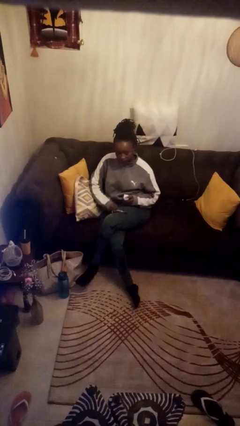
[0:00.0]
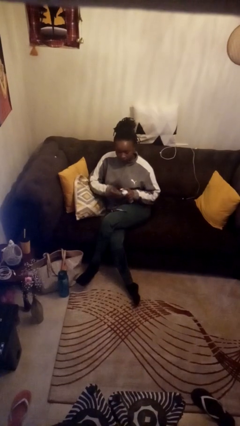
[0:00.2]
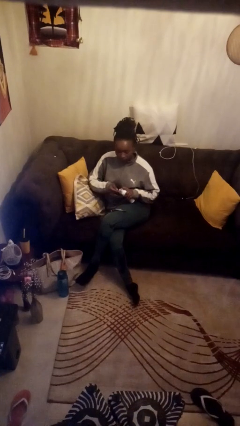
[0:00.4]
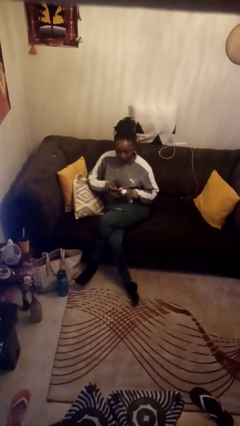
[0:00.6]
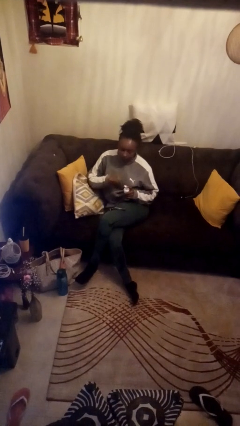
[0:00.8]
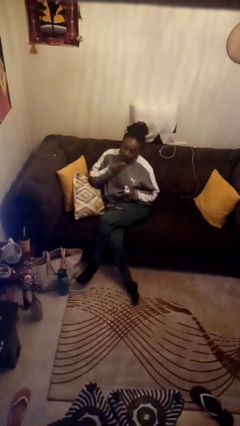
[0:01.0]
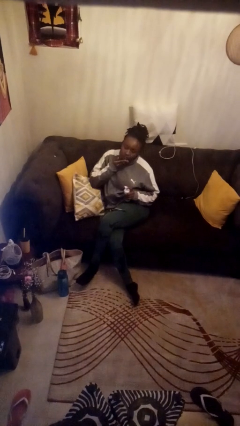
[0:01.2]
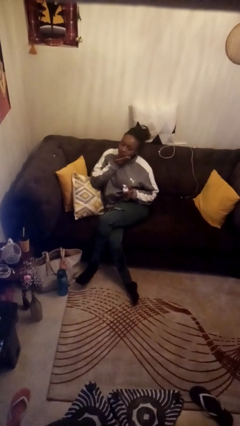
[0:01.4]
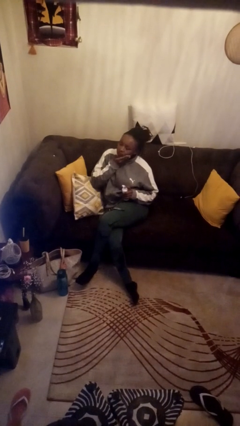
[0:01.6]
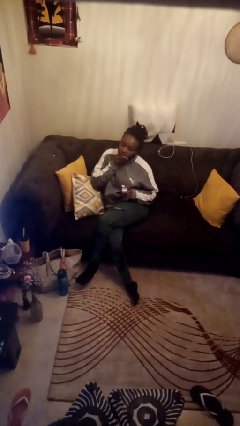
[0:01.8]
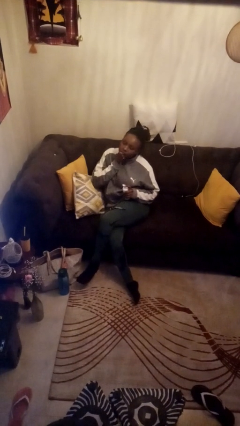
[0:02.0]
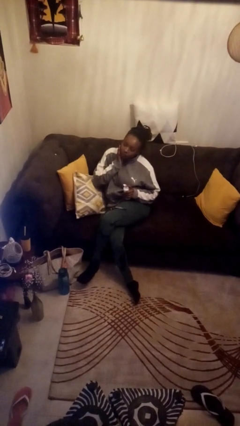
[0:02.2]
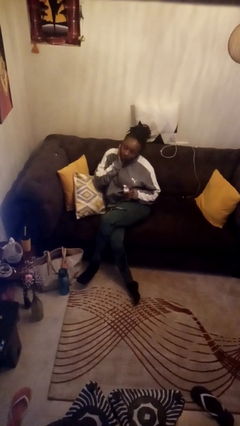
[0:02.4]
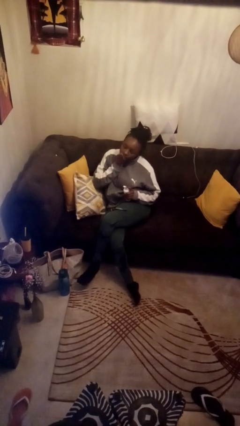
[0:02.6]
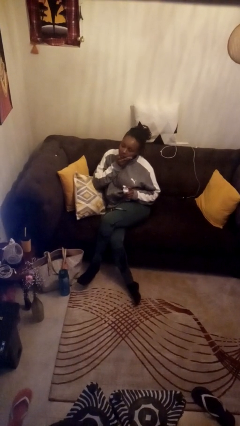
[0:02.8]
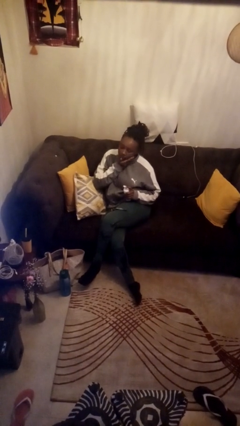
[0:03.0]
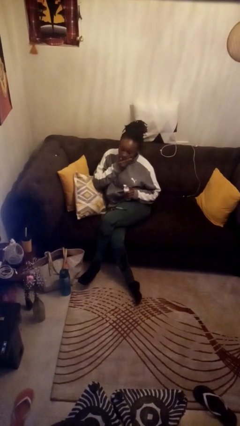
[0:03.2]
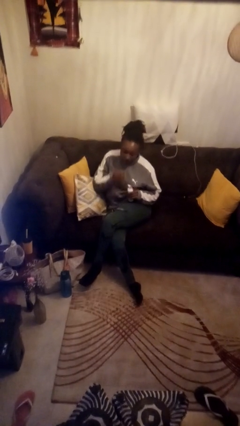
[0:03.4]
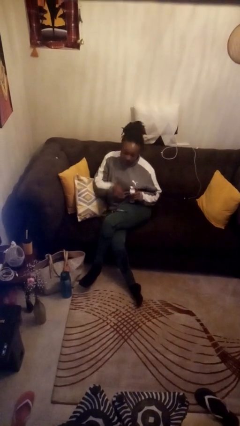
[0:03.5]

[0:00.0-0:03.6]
person applies shaving cream

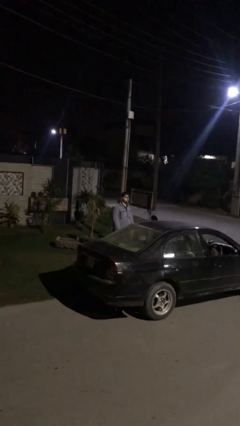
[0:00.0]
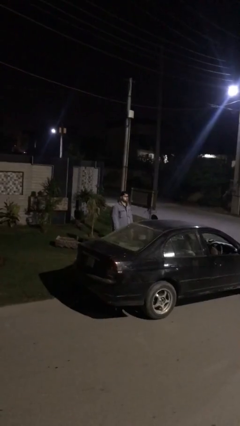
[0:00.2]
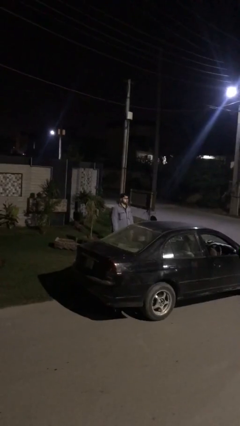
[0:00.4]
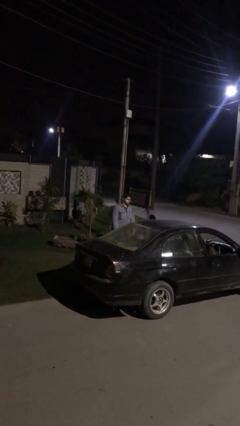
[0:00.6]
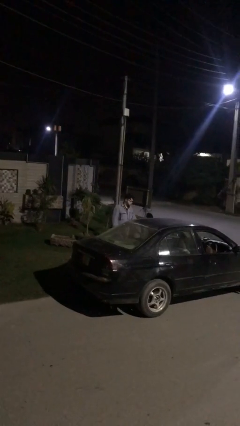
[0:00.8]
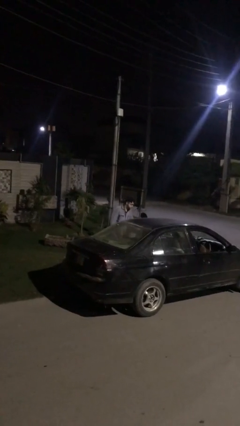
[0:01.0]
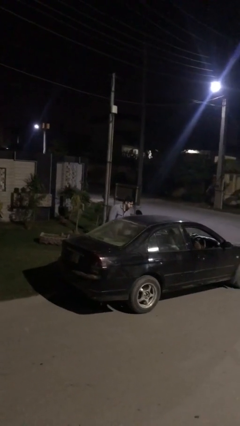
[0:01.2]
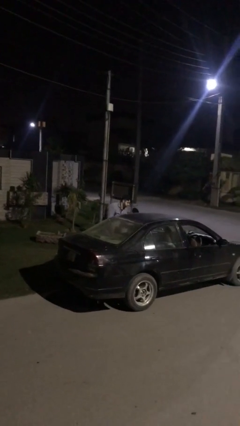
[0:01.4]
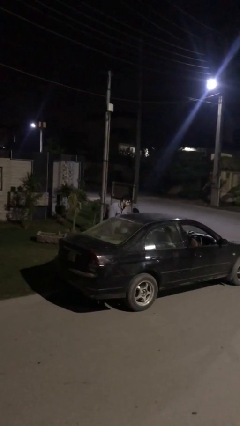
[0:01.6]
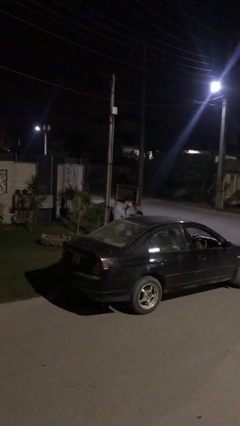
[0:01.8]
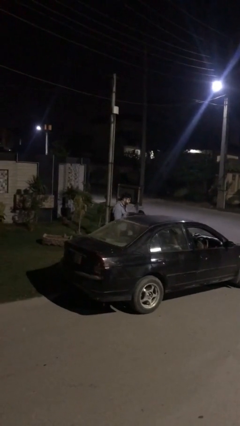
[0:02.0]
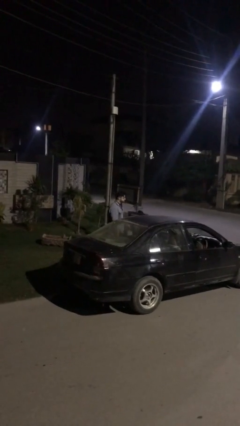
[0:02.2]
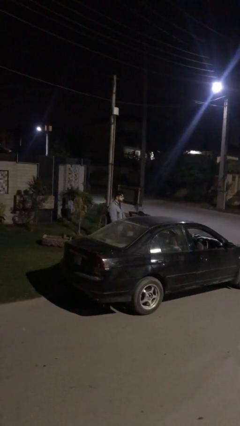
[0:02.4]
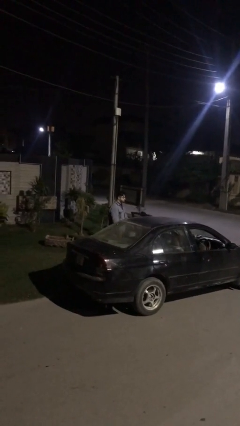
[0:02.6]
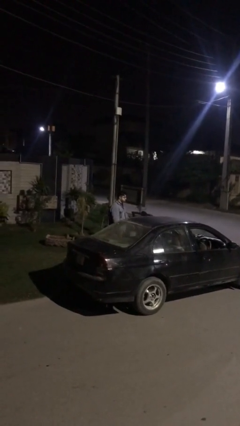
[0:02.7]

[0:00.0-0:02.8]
person opens car door

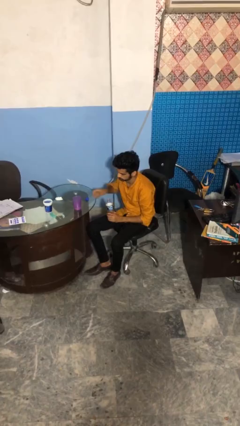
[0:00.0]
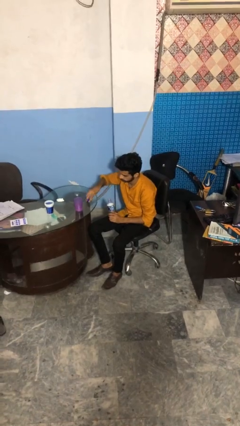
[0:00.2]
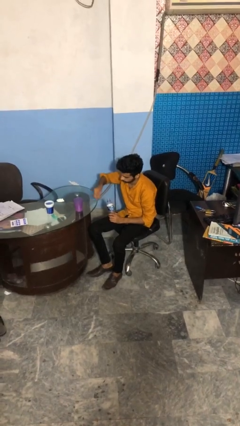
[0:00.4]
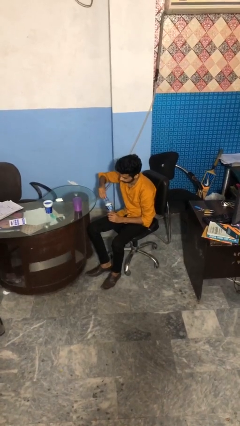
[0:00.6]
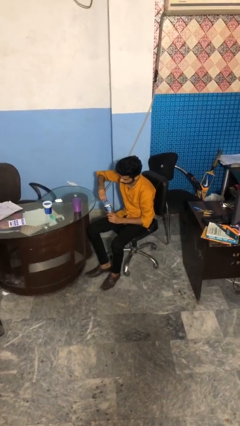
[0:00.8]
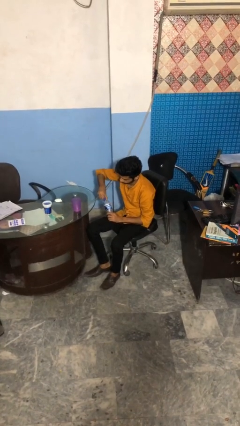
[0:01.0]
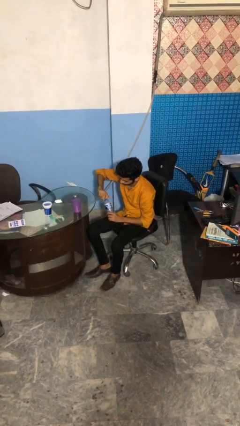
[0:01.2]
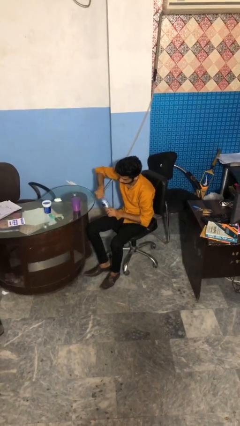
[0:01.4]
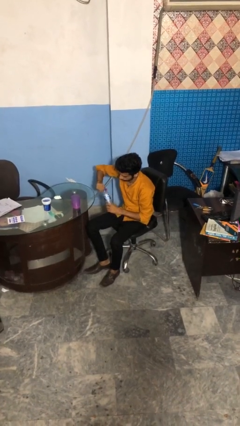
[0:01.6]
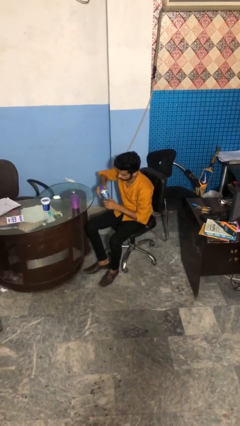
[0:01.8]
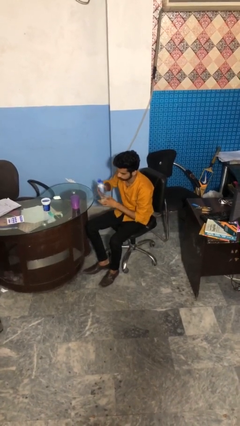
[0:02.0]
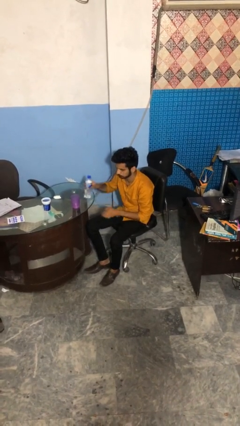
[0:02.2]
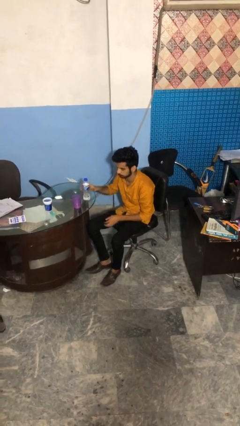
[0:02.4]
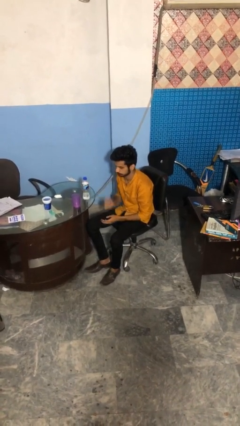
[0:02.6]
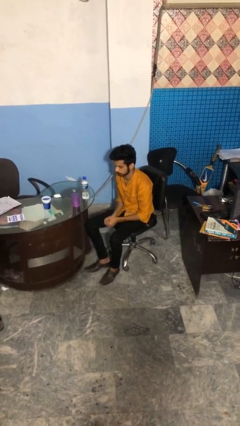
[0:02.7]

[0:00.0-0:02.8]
person screws lid to bottle

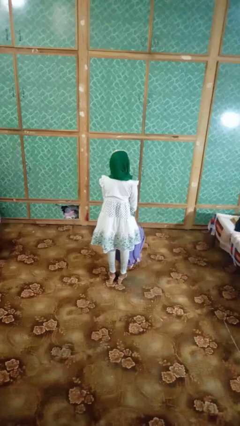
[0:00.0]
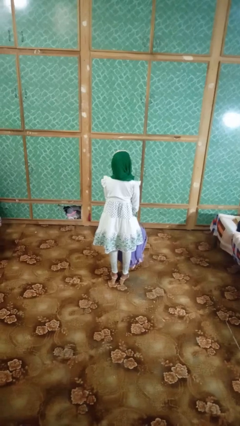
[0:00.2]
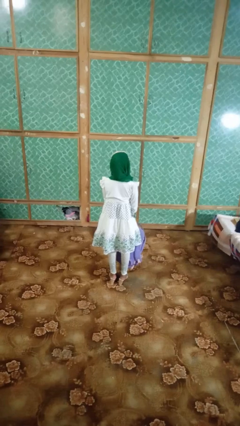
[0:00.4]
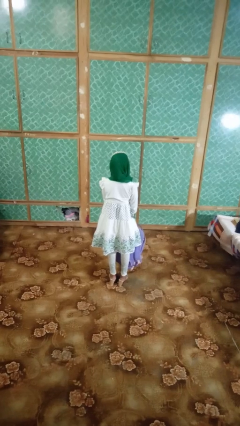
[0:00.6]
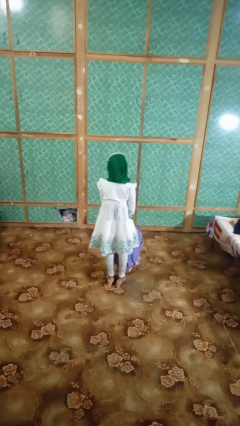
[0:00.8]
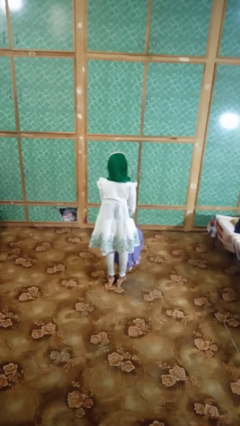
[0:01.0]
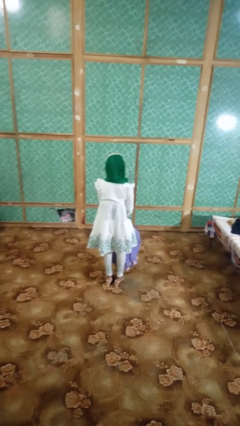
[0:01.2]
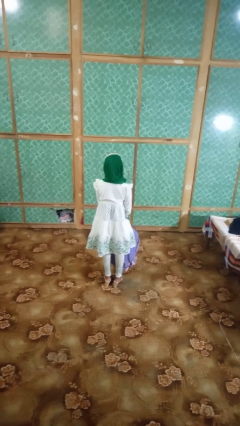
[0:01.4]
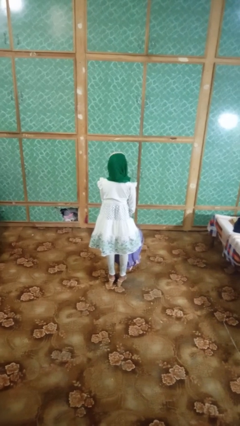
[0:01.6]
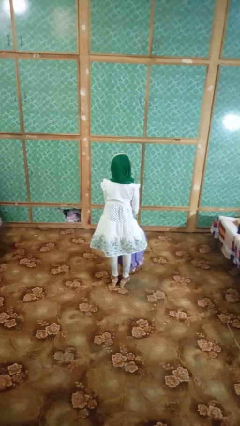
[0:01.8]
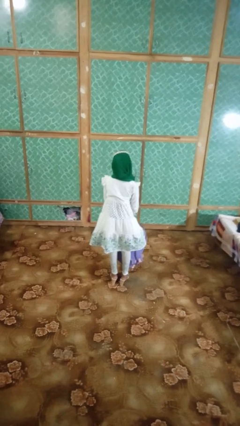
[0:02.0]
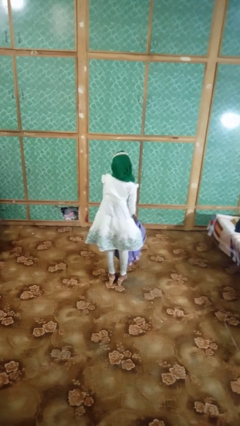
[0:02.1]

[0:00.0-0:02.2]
person puts on backpack

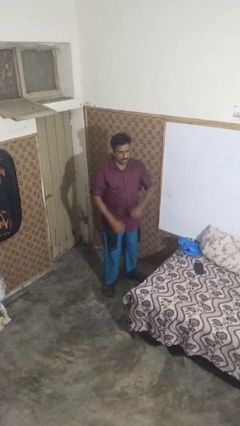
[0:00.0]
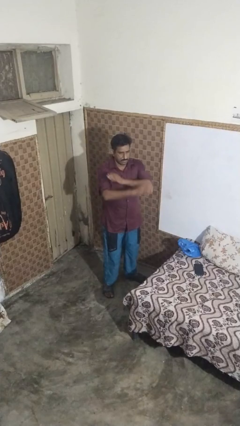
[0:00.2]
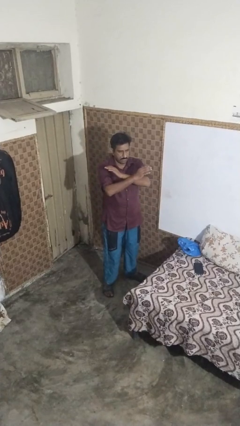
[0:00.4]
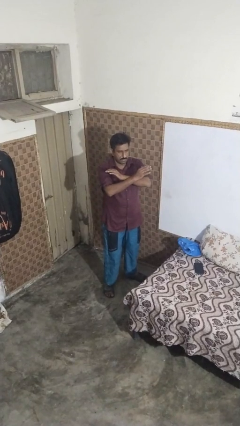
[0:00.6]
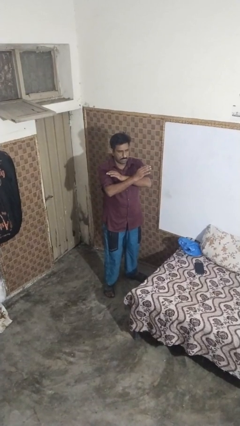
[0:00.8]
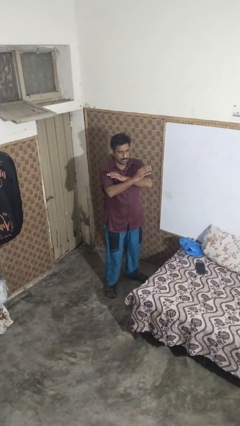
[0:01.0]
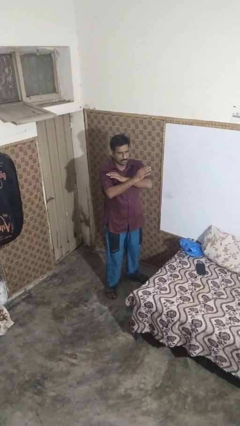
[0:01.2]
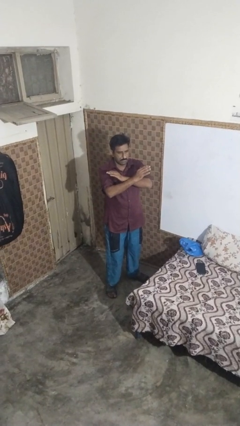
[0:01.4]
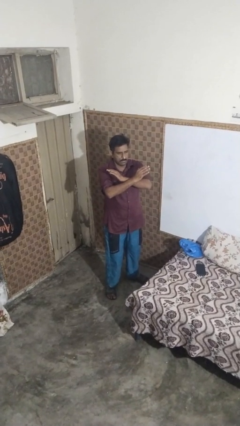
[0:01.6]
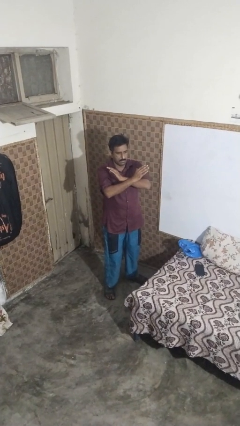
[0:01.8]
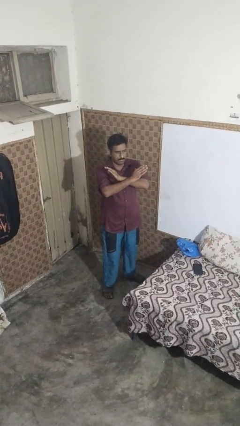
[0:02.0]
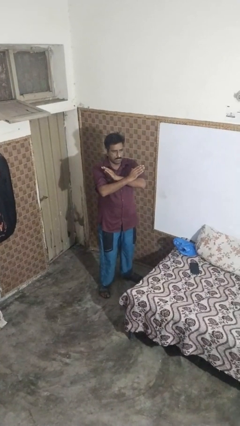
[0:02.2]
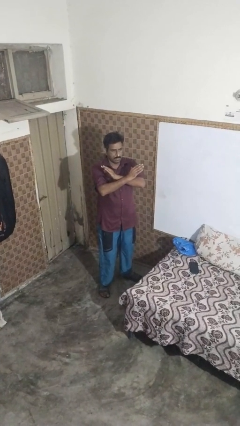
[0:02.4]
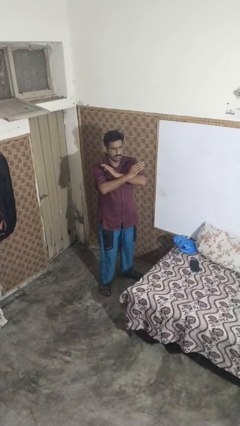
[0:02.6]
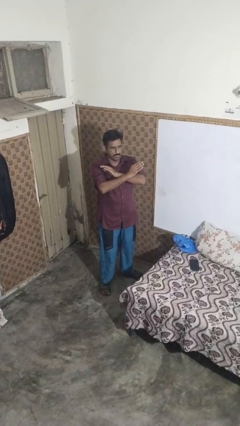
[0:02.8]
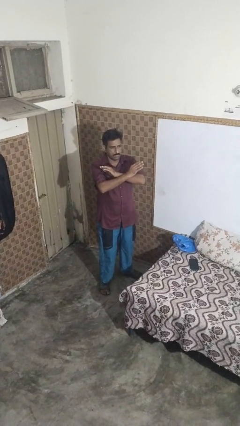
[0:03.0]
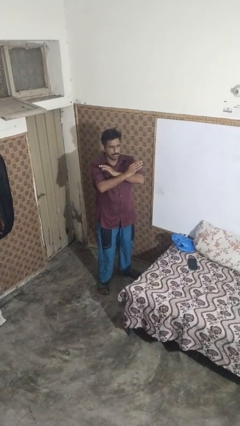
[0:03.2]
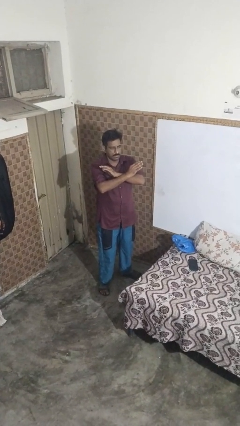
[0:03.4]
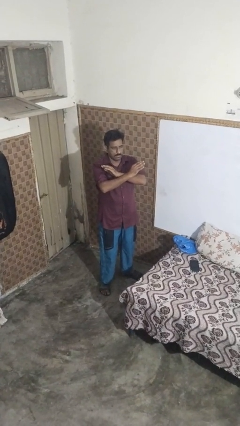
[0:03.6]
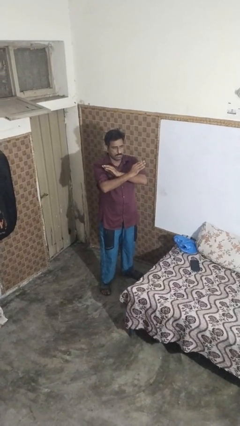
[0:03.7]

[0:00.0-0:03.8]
person gestures arms x

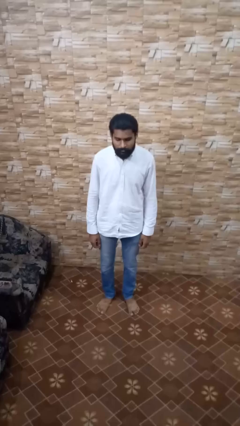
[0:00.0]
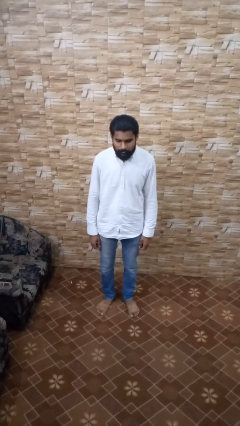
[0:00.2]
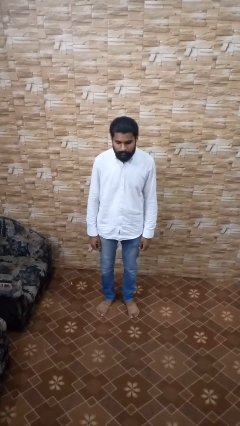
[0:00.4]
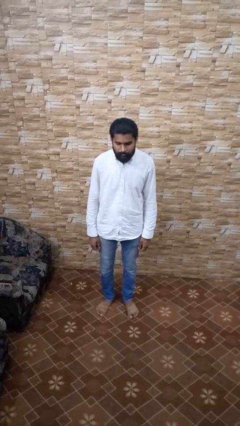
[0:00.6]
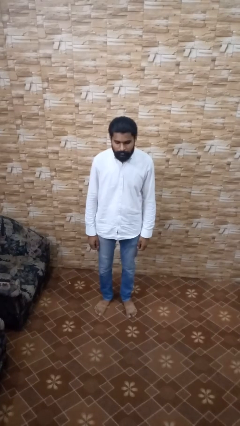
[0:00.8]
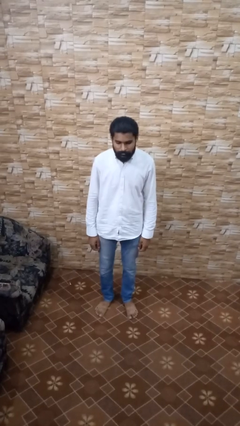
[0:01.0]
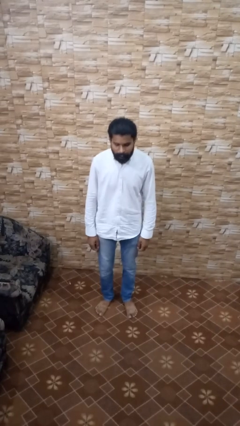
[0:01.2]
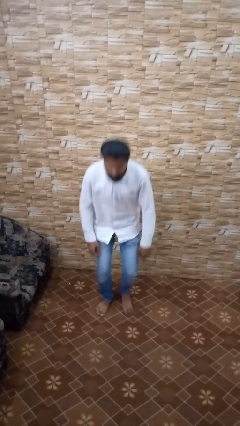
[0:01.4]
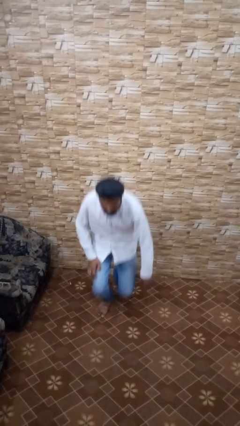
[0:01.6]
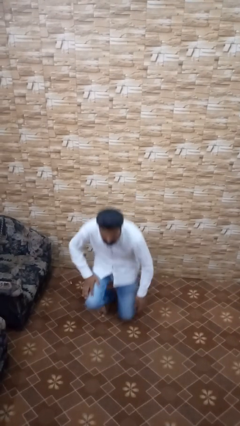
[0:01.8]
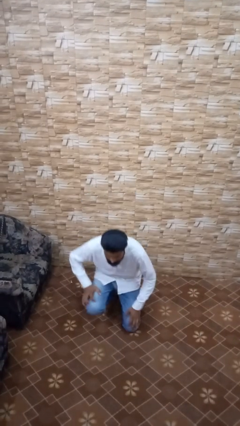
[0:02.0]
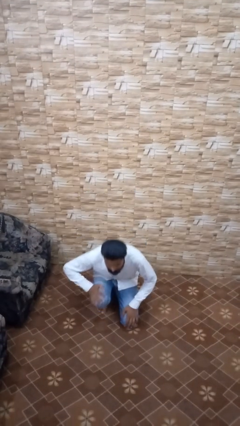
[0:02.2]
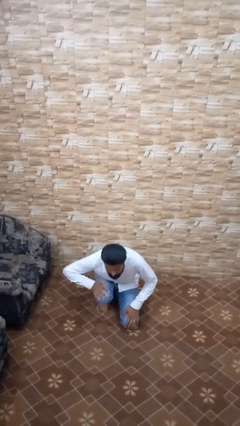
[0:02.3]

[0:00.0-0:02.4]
person kneels
